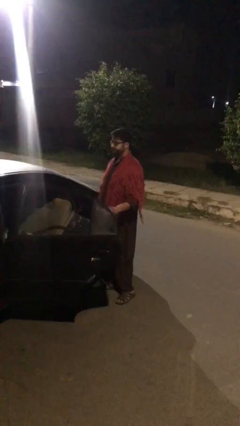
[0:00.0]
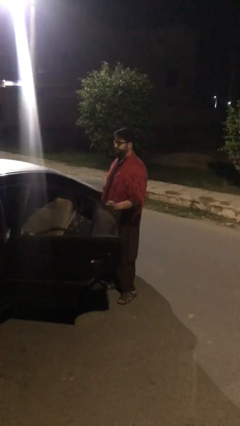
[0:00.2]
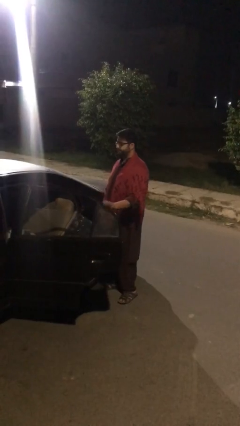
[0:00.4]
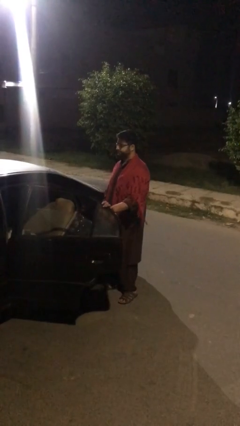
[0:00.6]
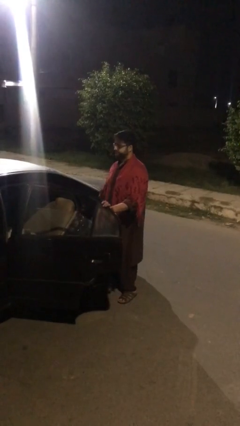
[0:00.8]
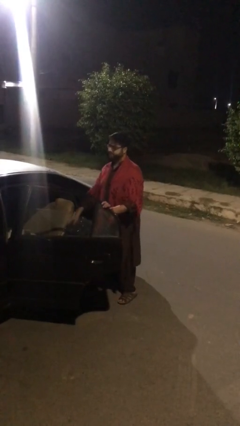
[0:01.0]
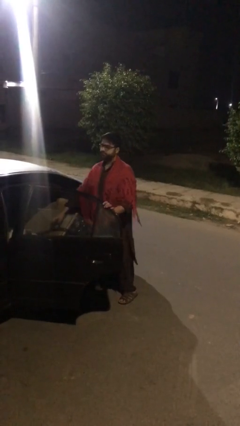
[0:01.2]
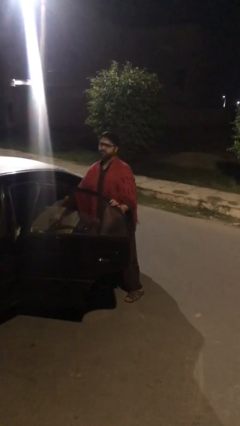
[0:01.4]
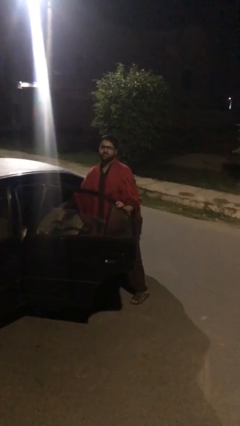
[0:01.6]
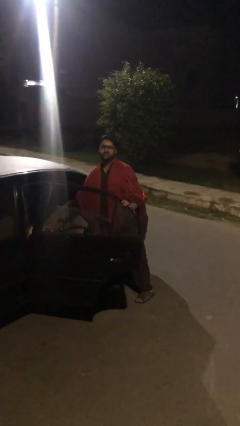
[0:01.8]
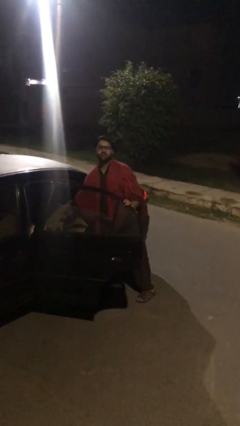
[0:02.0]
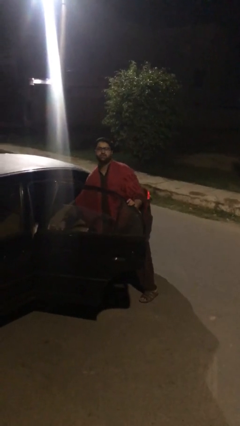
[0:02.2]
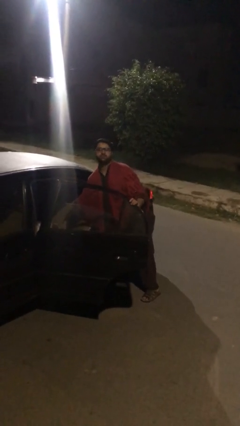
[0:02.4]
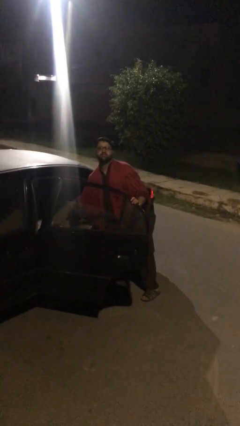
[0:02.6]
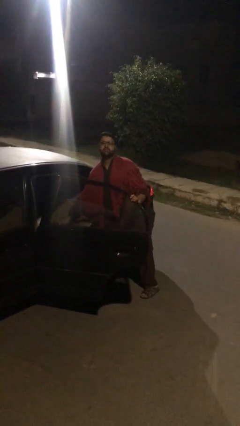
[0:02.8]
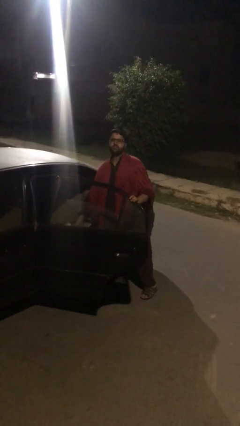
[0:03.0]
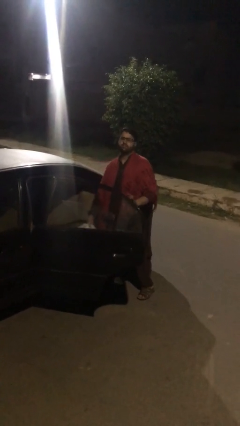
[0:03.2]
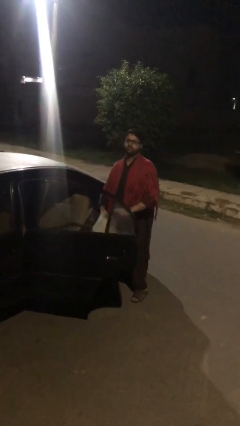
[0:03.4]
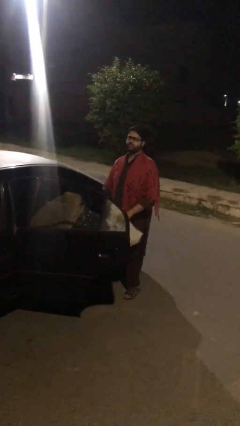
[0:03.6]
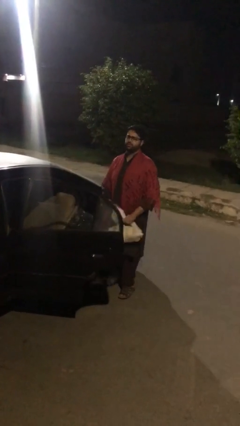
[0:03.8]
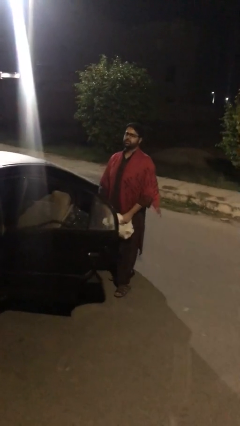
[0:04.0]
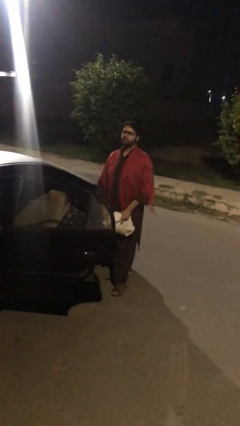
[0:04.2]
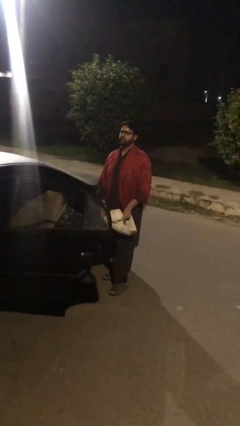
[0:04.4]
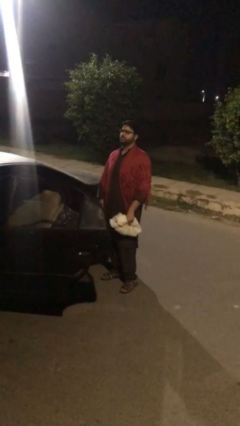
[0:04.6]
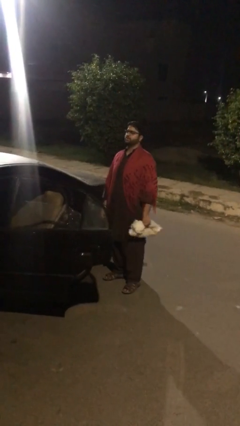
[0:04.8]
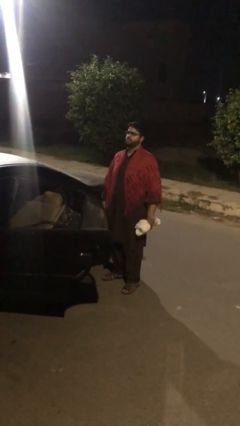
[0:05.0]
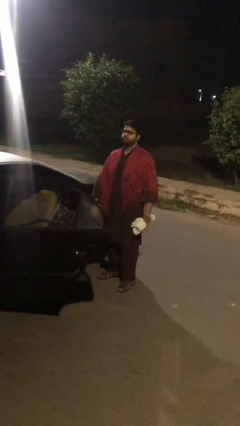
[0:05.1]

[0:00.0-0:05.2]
person unloads car

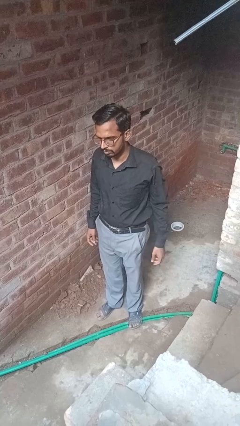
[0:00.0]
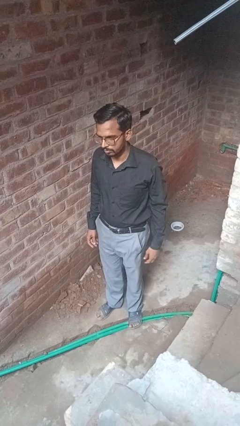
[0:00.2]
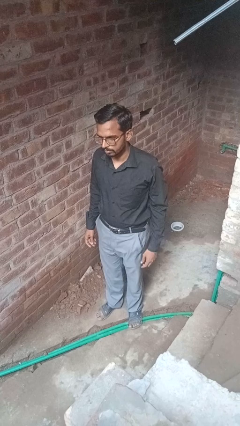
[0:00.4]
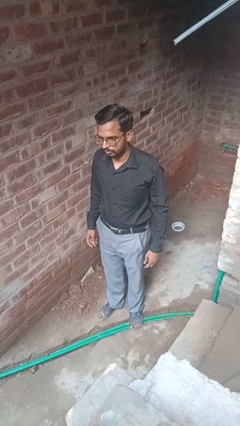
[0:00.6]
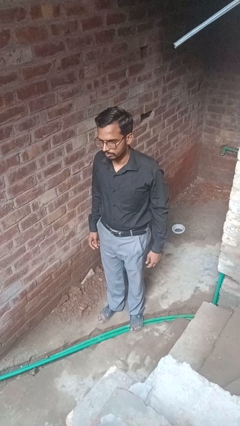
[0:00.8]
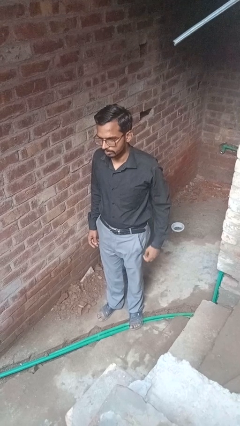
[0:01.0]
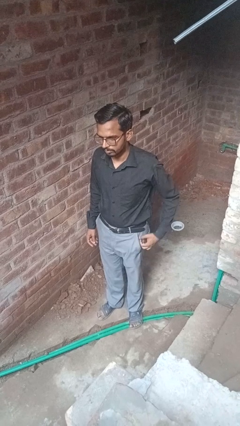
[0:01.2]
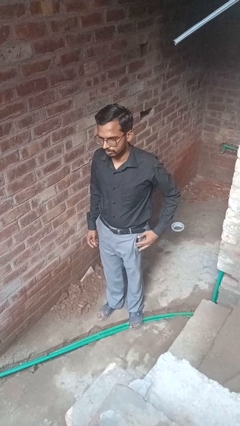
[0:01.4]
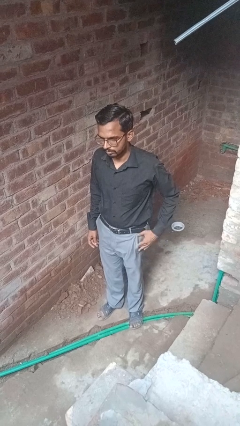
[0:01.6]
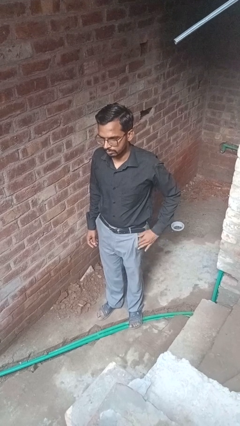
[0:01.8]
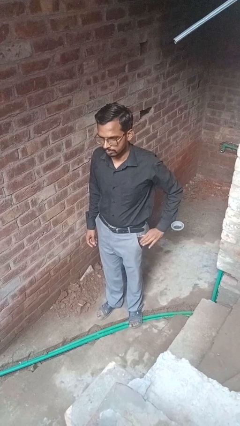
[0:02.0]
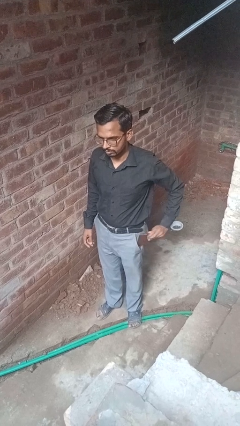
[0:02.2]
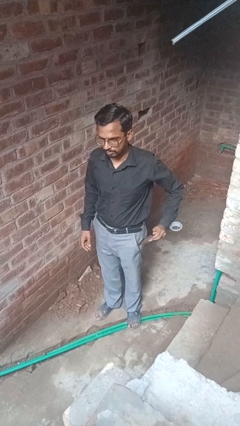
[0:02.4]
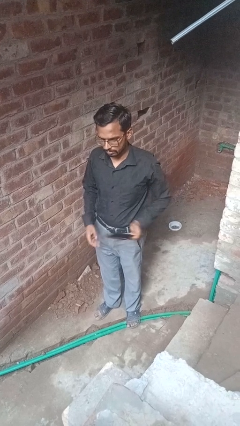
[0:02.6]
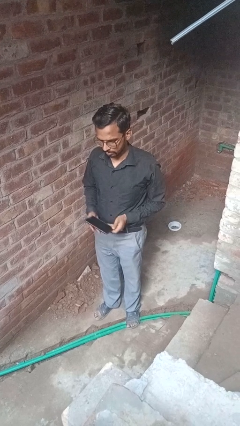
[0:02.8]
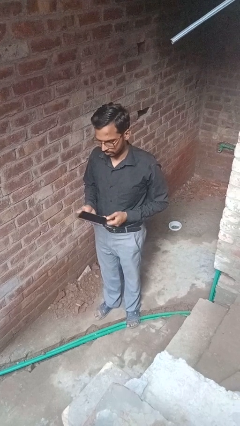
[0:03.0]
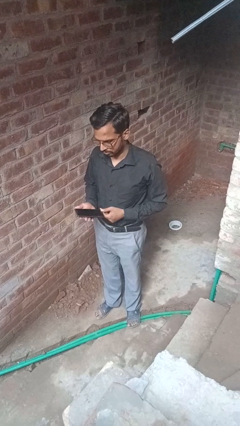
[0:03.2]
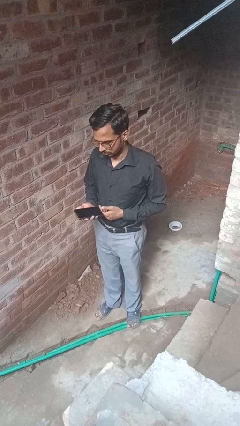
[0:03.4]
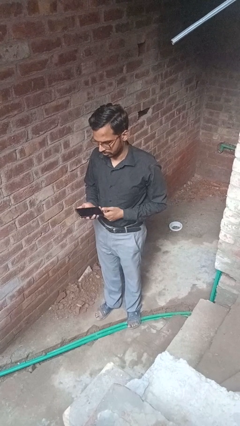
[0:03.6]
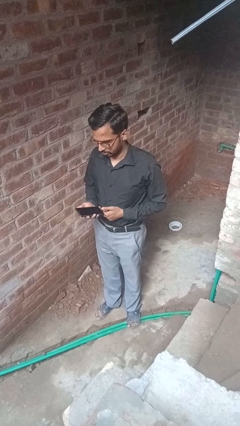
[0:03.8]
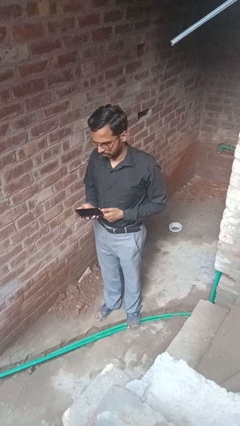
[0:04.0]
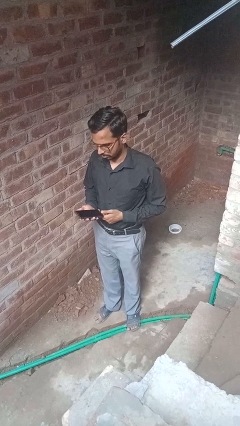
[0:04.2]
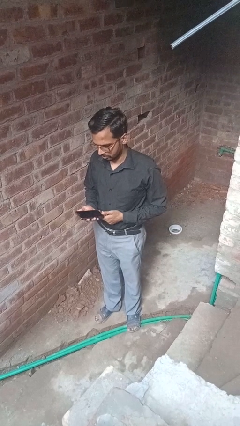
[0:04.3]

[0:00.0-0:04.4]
person takes phone from pocket

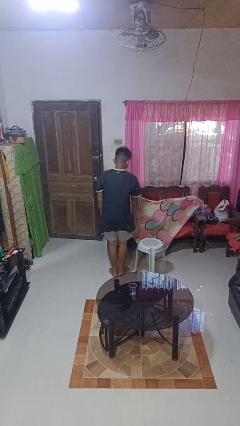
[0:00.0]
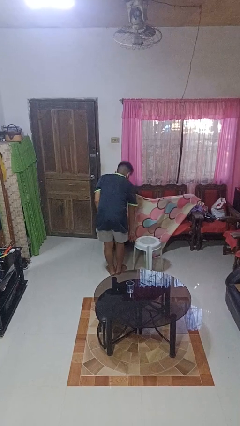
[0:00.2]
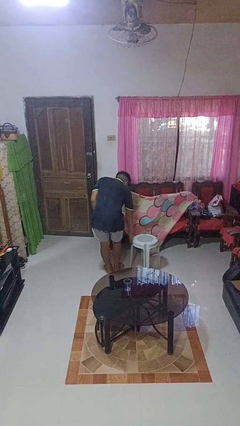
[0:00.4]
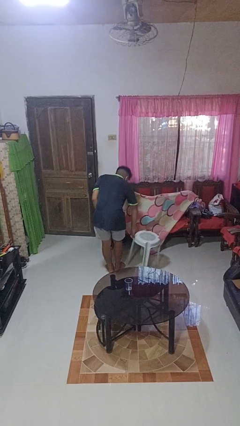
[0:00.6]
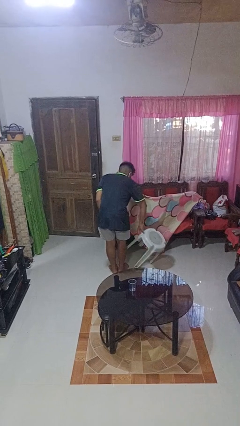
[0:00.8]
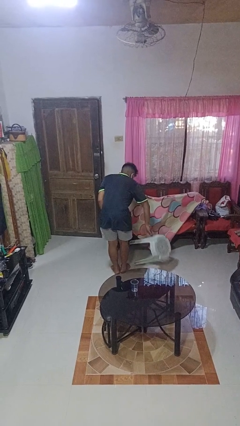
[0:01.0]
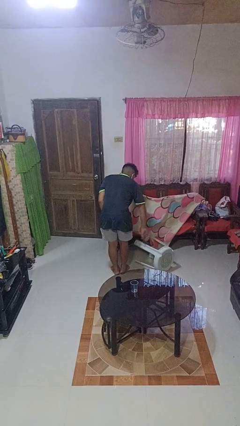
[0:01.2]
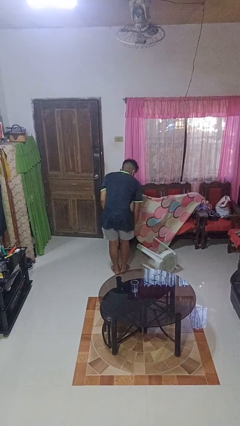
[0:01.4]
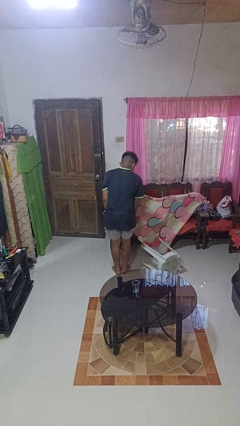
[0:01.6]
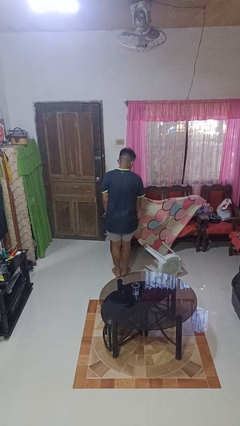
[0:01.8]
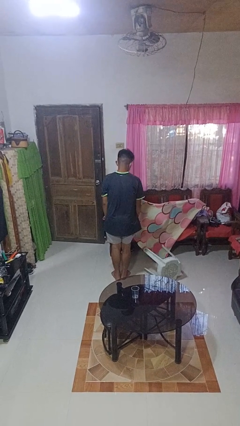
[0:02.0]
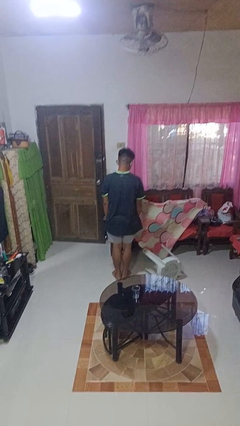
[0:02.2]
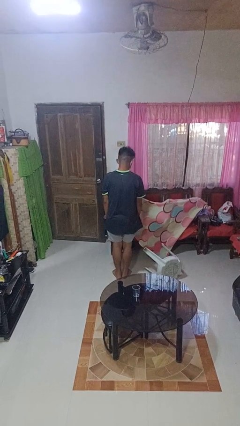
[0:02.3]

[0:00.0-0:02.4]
person knocks over furniture

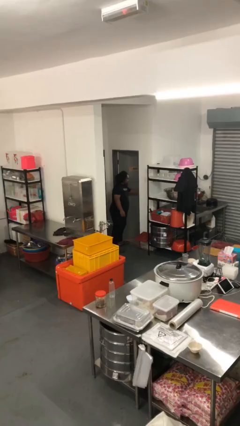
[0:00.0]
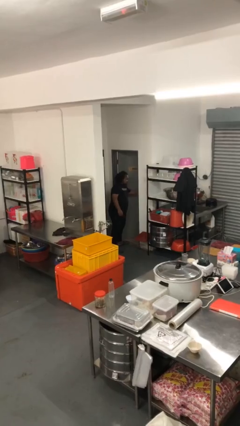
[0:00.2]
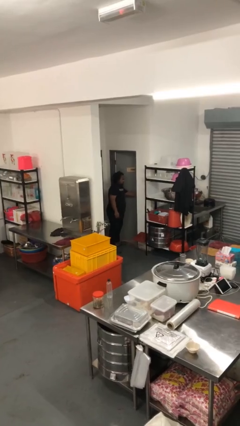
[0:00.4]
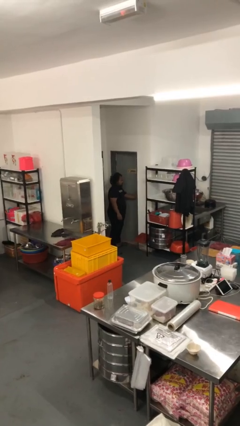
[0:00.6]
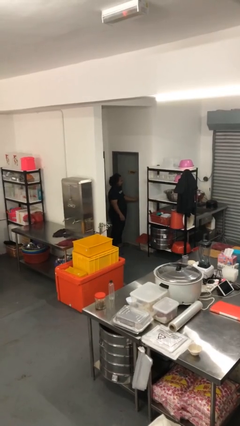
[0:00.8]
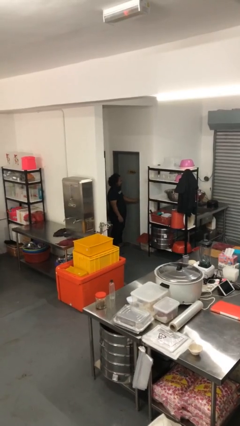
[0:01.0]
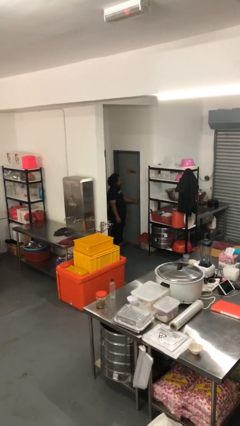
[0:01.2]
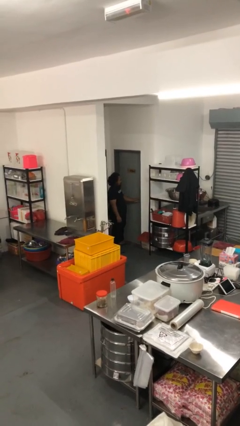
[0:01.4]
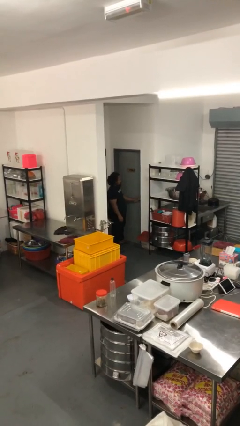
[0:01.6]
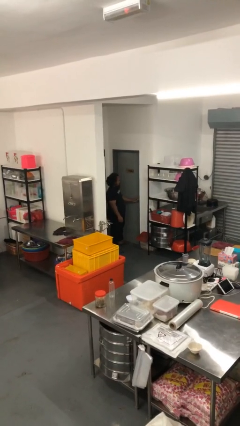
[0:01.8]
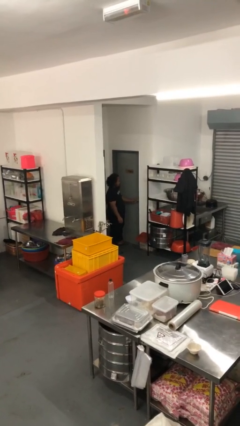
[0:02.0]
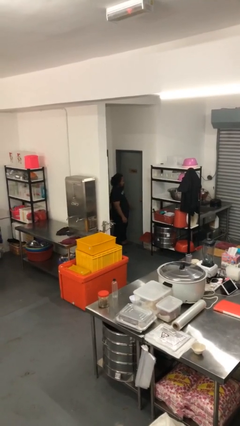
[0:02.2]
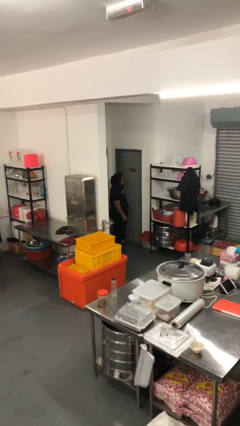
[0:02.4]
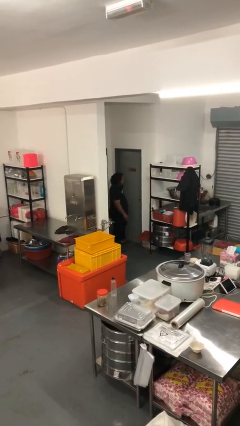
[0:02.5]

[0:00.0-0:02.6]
person closes facility door

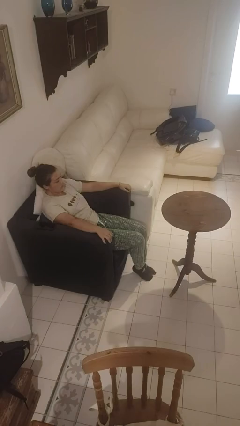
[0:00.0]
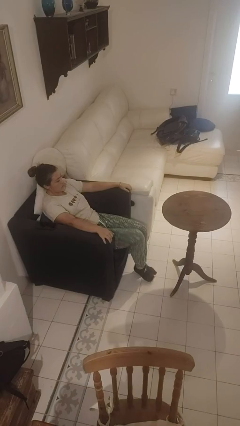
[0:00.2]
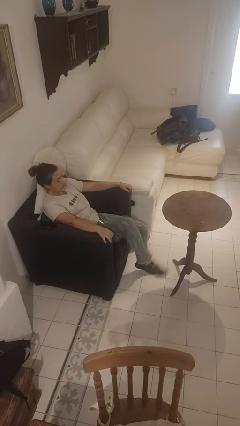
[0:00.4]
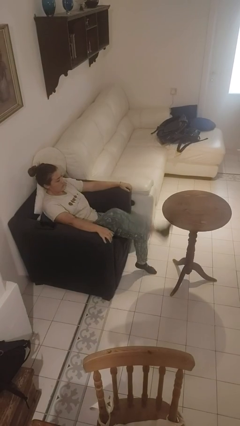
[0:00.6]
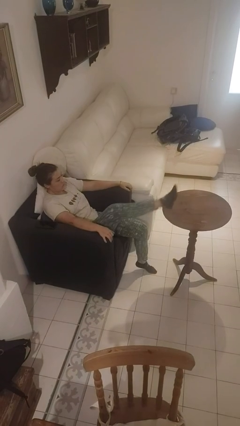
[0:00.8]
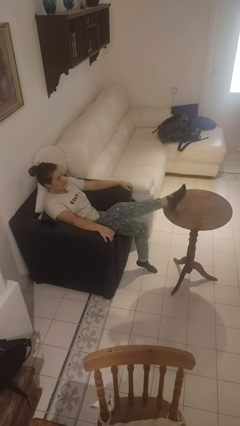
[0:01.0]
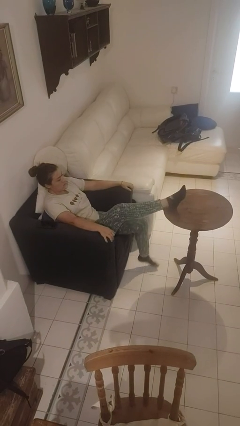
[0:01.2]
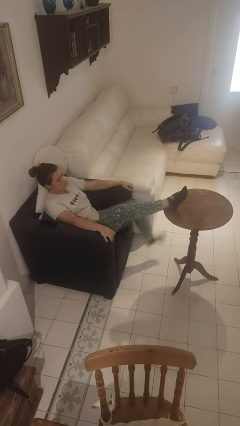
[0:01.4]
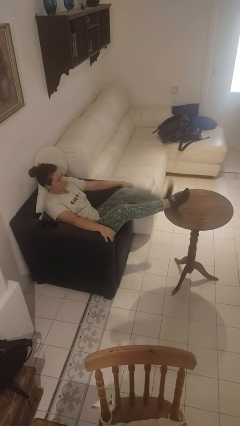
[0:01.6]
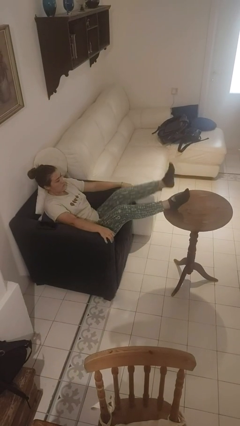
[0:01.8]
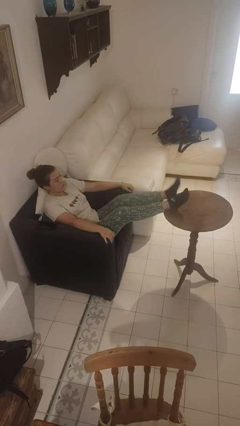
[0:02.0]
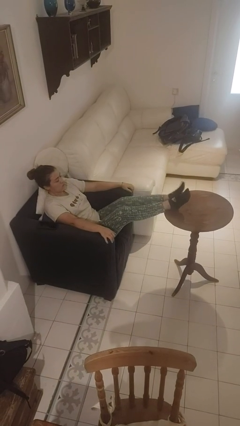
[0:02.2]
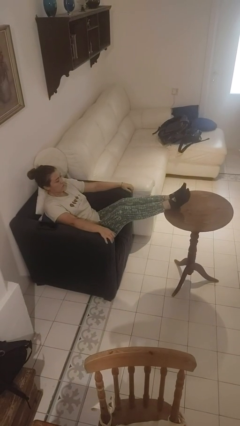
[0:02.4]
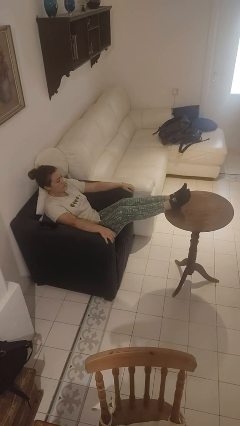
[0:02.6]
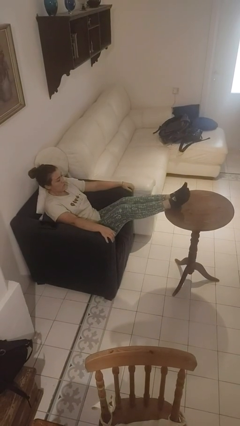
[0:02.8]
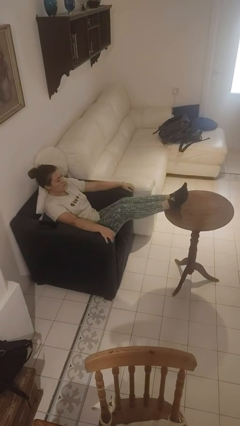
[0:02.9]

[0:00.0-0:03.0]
person puts feet up
